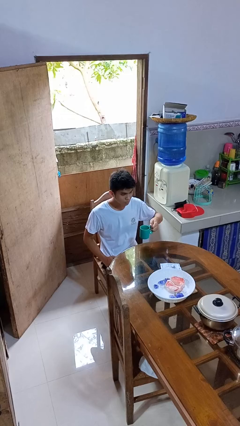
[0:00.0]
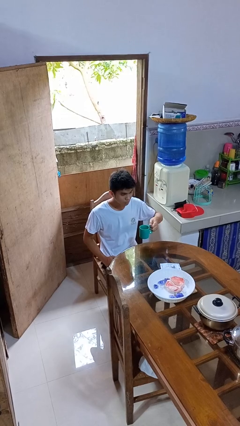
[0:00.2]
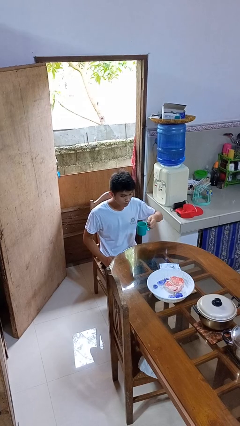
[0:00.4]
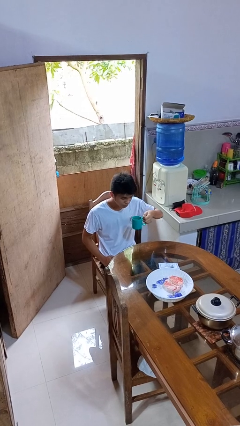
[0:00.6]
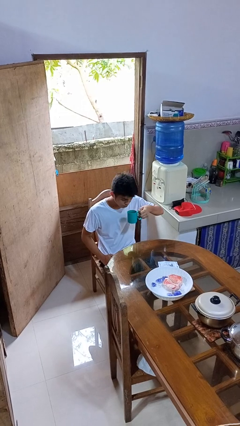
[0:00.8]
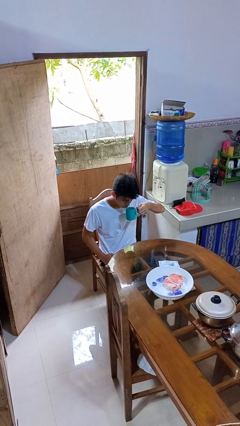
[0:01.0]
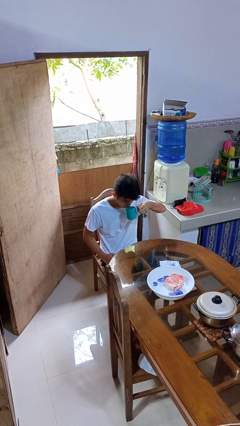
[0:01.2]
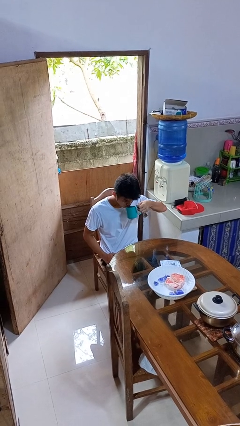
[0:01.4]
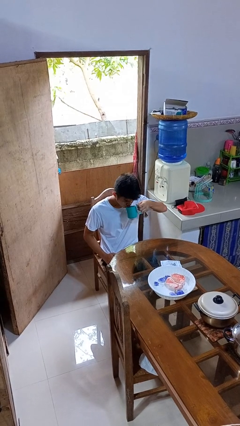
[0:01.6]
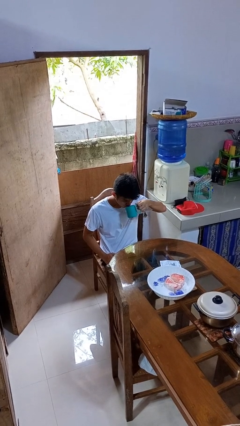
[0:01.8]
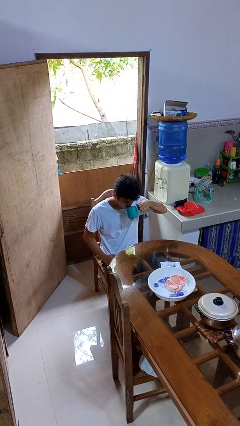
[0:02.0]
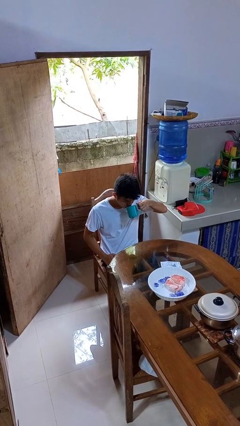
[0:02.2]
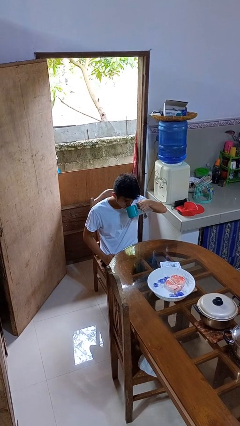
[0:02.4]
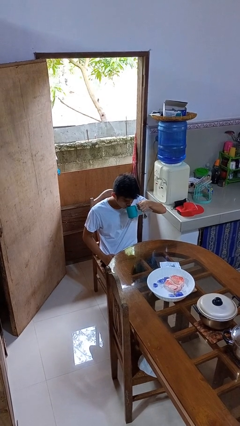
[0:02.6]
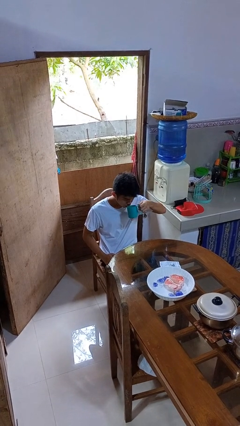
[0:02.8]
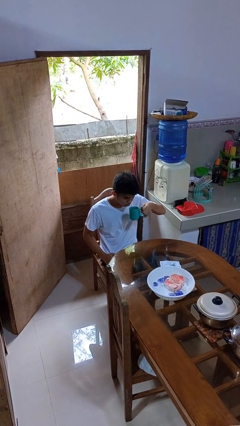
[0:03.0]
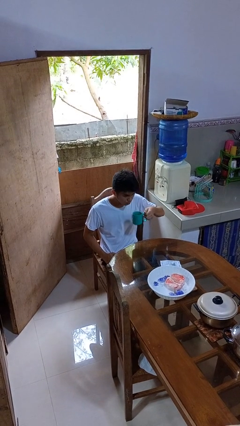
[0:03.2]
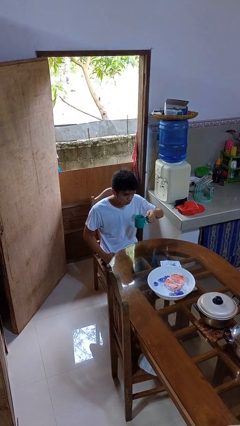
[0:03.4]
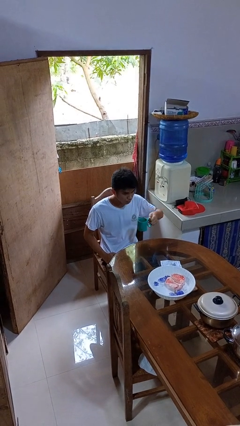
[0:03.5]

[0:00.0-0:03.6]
person drinks from mug

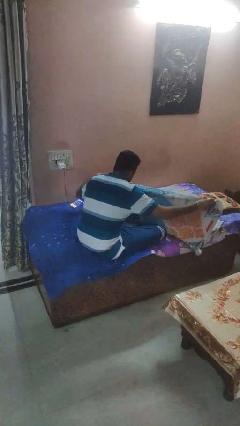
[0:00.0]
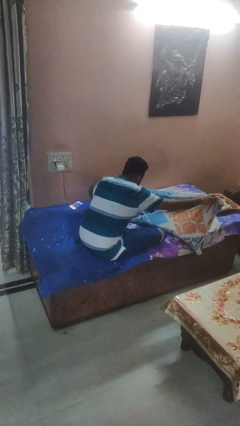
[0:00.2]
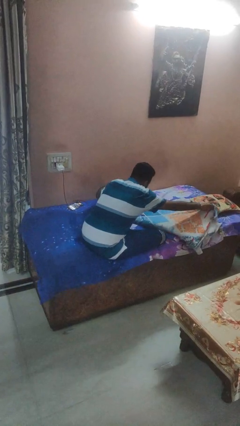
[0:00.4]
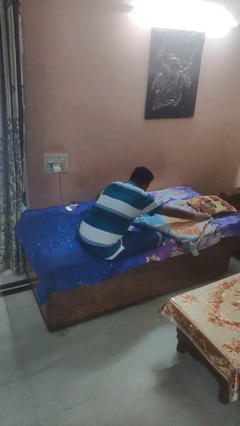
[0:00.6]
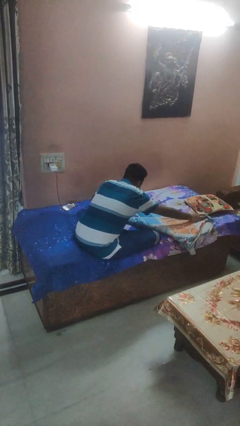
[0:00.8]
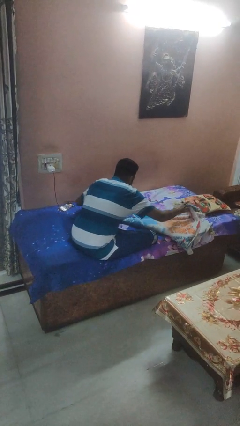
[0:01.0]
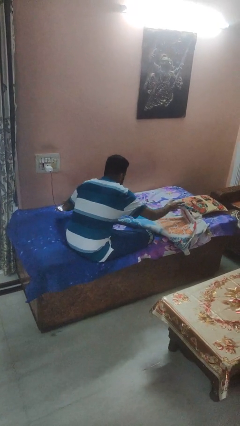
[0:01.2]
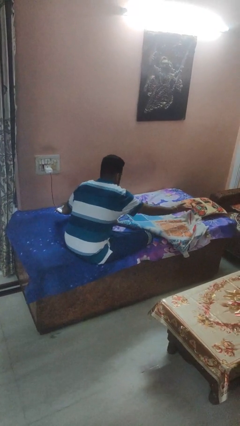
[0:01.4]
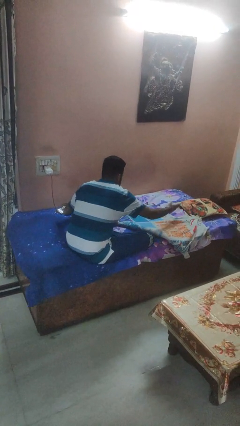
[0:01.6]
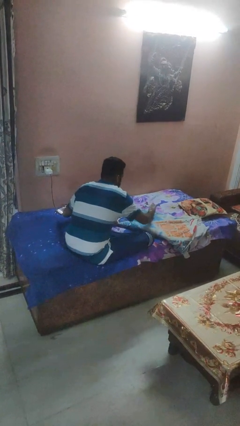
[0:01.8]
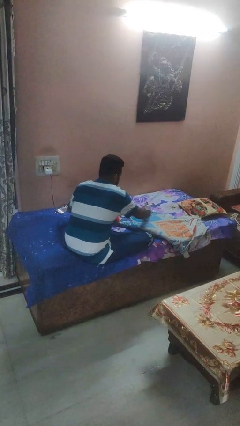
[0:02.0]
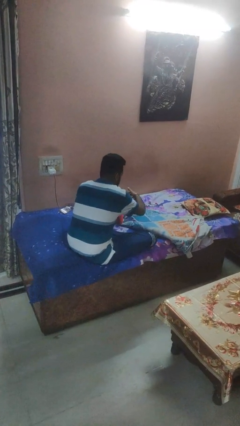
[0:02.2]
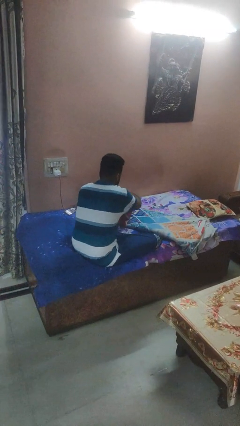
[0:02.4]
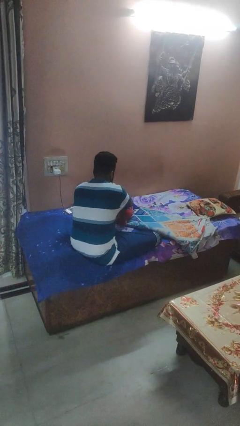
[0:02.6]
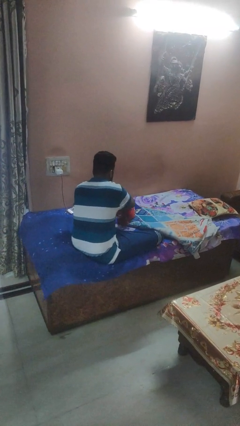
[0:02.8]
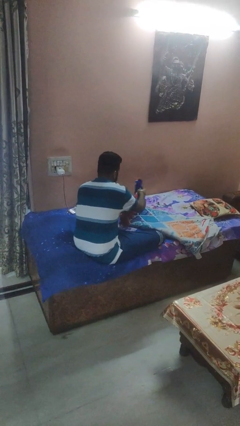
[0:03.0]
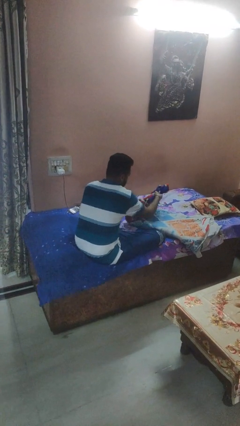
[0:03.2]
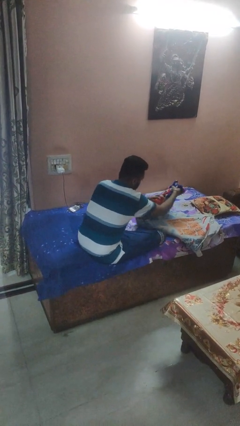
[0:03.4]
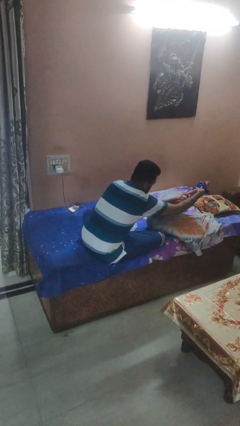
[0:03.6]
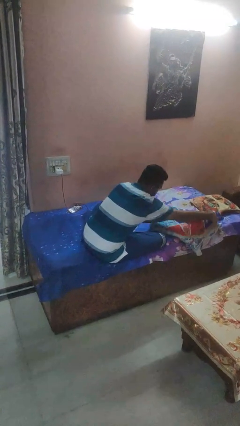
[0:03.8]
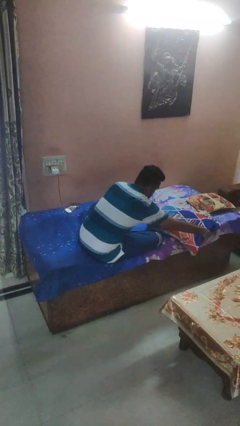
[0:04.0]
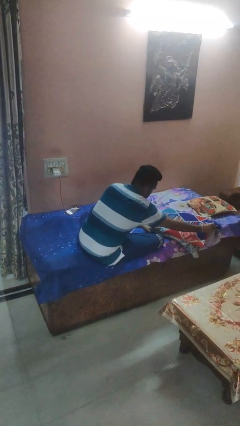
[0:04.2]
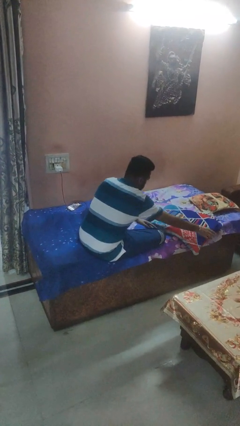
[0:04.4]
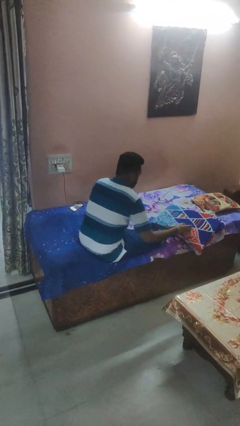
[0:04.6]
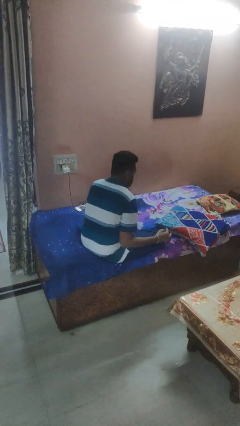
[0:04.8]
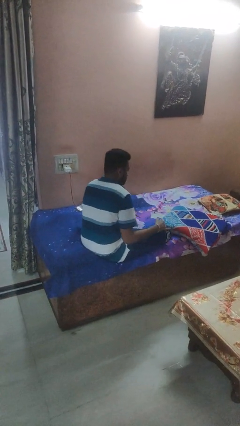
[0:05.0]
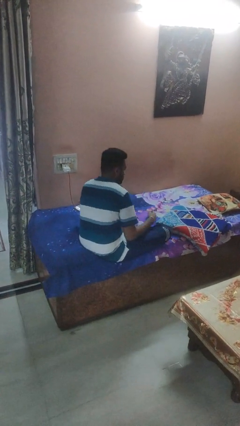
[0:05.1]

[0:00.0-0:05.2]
person folds blanket

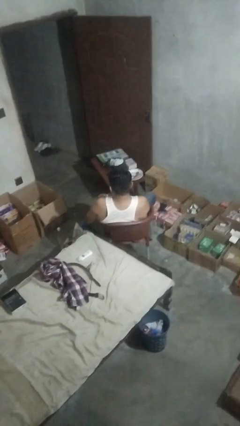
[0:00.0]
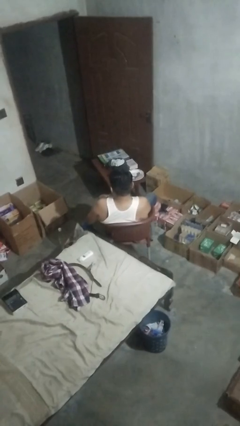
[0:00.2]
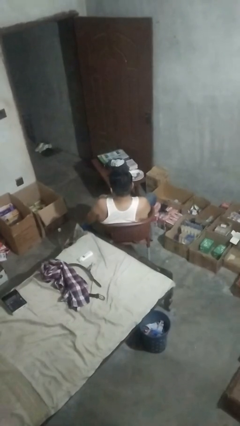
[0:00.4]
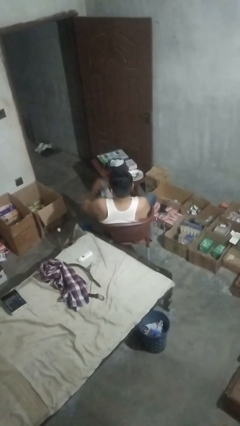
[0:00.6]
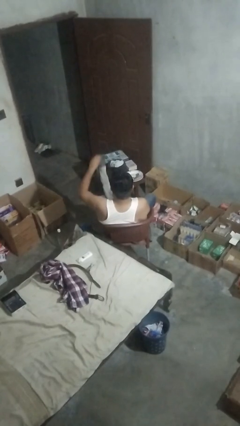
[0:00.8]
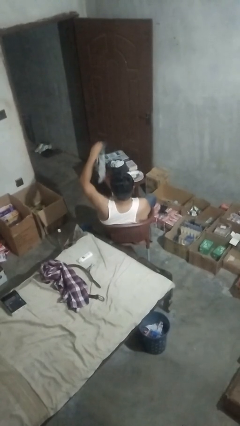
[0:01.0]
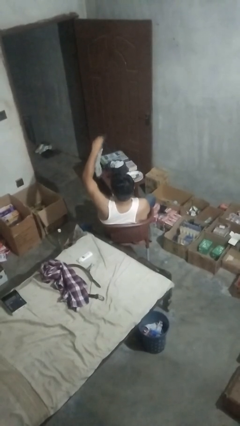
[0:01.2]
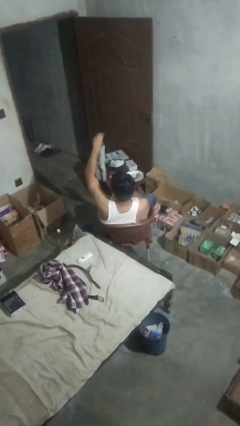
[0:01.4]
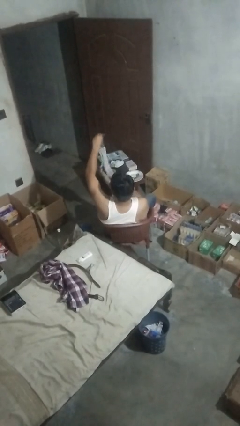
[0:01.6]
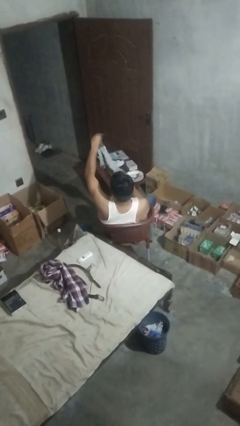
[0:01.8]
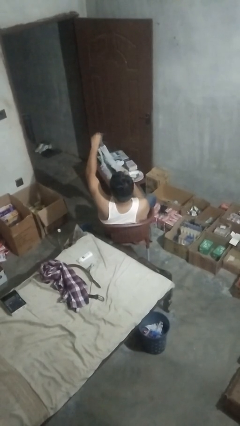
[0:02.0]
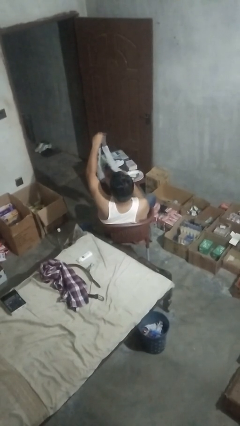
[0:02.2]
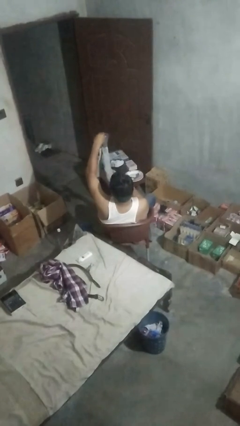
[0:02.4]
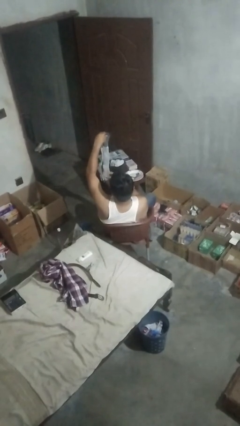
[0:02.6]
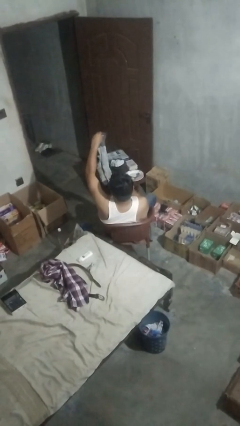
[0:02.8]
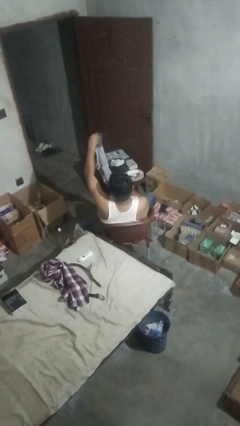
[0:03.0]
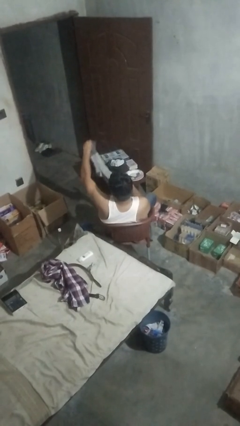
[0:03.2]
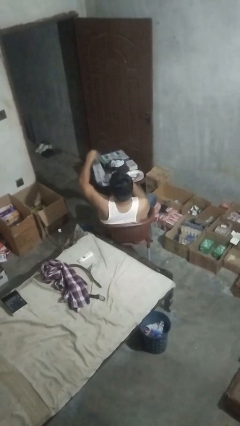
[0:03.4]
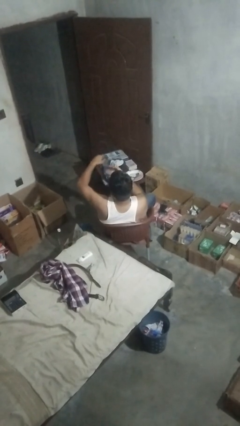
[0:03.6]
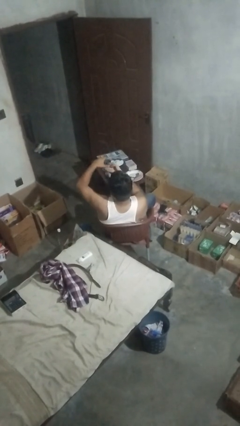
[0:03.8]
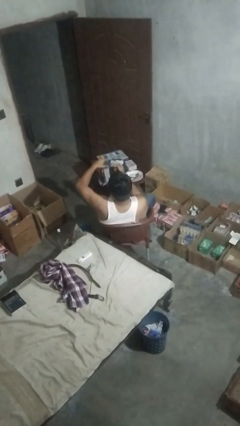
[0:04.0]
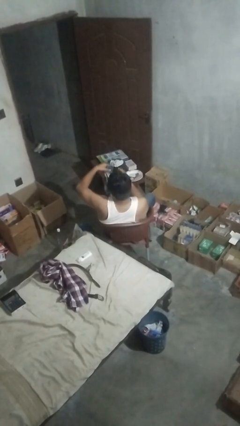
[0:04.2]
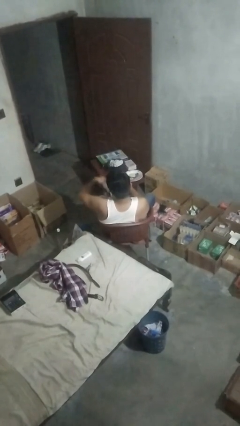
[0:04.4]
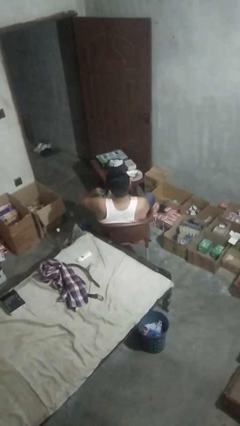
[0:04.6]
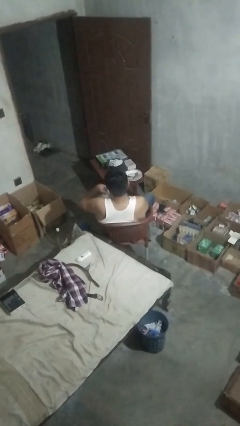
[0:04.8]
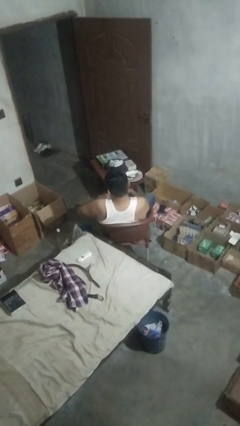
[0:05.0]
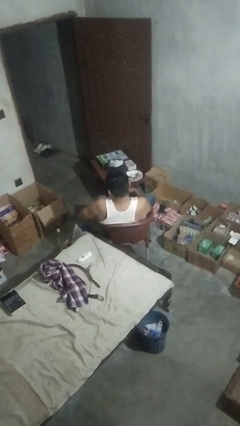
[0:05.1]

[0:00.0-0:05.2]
person folds socks

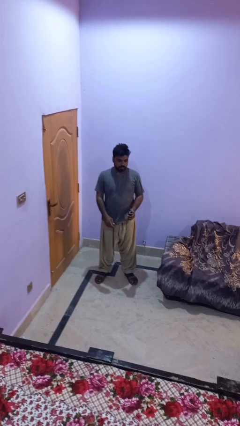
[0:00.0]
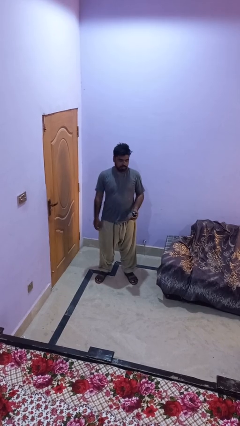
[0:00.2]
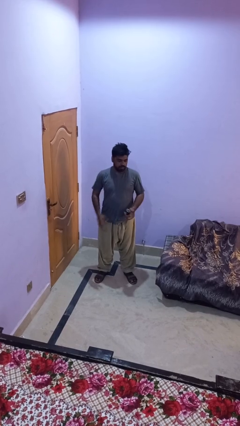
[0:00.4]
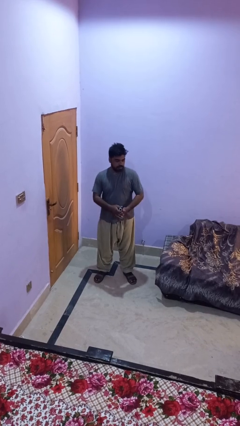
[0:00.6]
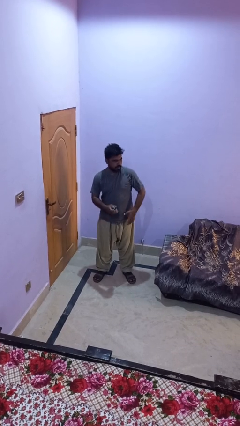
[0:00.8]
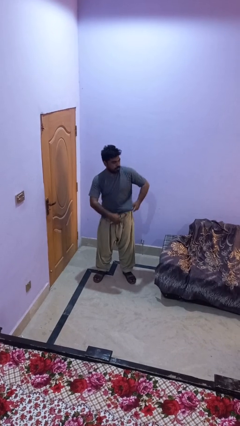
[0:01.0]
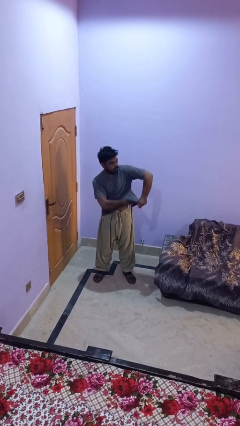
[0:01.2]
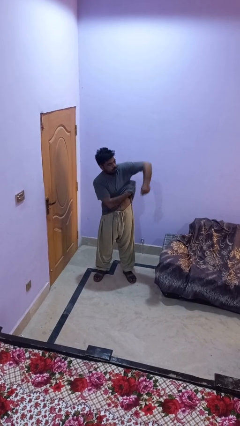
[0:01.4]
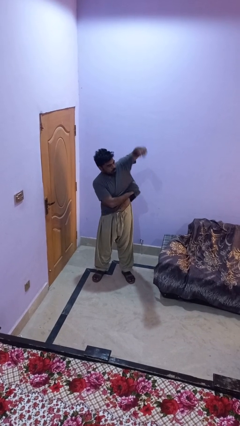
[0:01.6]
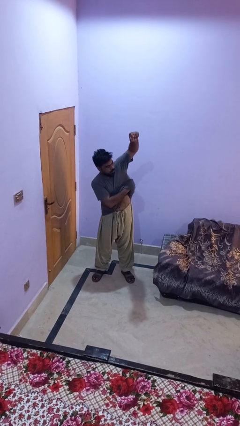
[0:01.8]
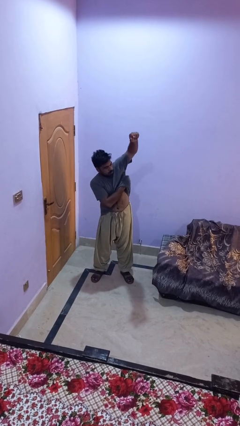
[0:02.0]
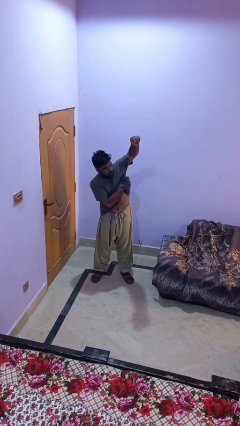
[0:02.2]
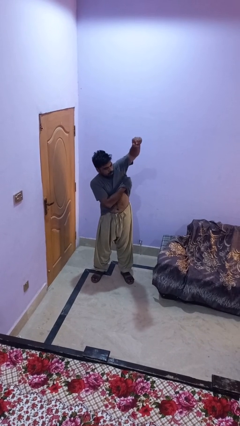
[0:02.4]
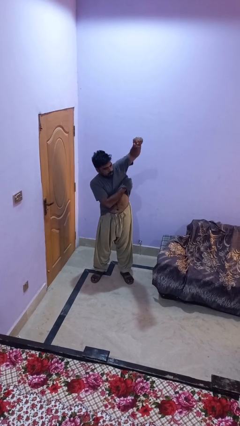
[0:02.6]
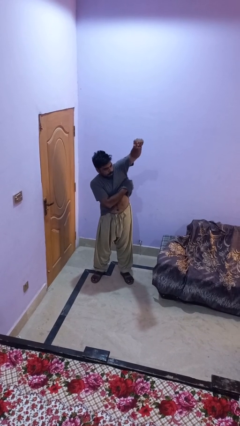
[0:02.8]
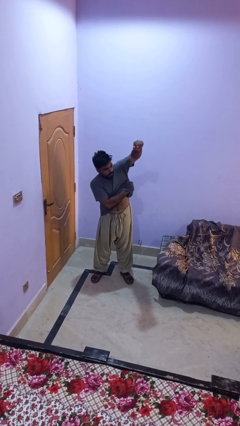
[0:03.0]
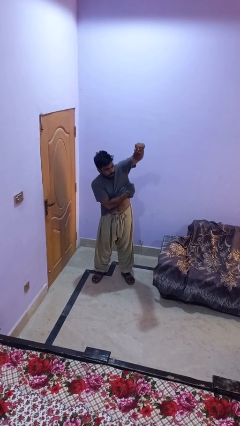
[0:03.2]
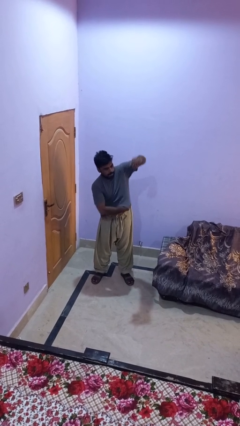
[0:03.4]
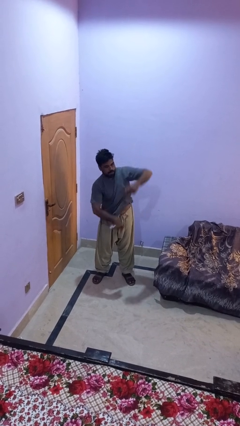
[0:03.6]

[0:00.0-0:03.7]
person applies deodorant

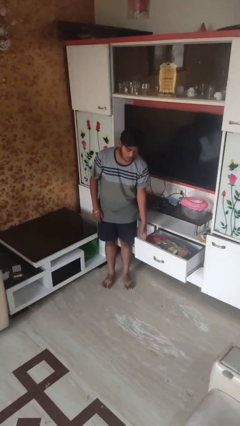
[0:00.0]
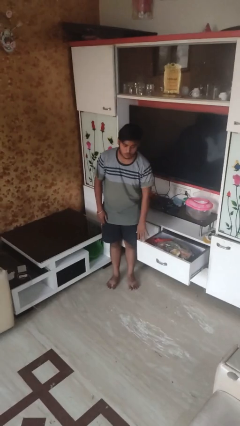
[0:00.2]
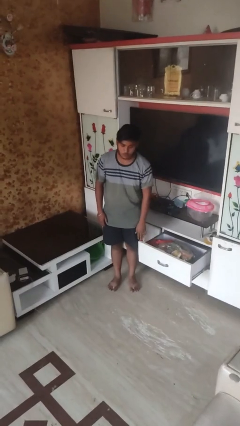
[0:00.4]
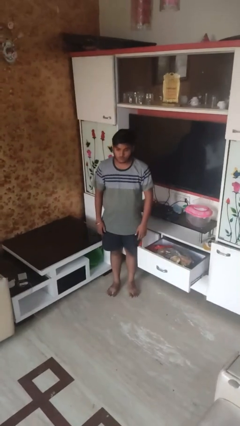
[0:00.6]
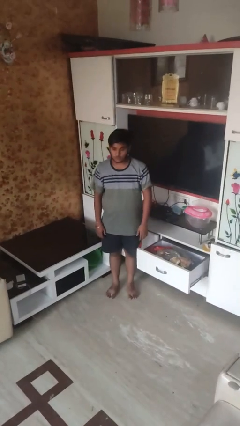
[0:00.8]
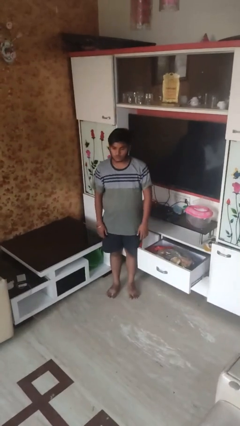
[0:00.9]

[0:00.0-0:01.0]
person opens dresser drawer
